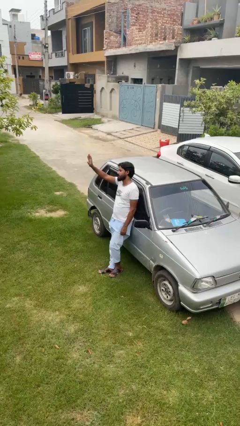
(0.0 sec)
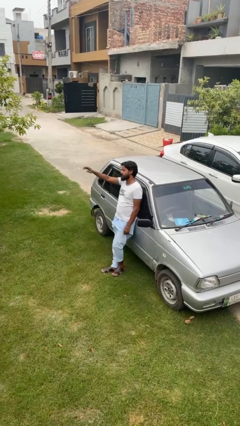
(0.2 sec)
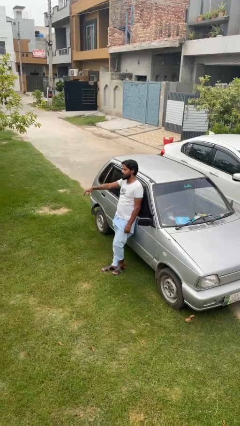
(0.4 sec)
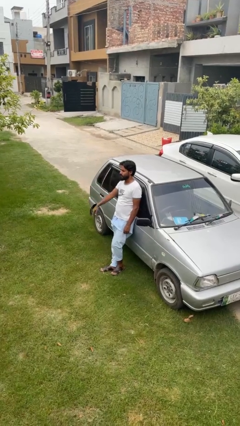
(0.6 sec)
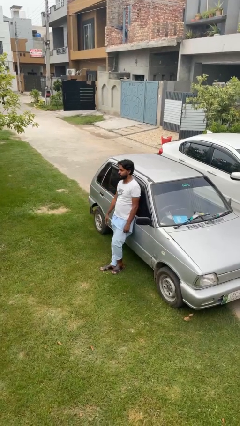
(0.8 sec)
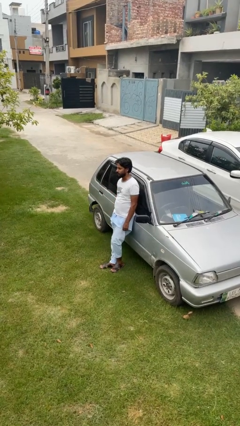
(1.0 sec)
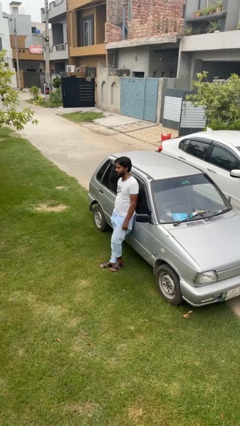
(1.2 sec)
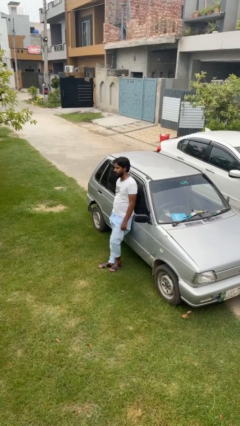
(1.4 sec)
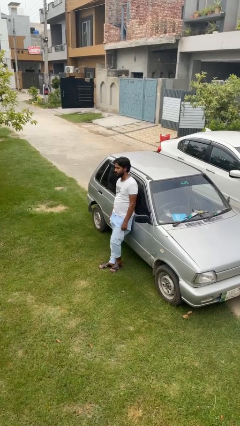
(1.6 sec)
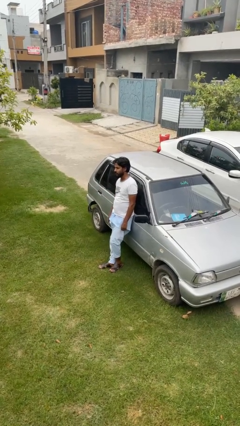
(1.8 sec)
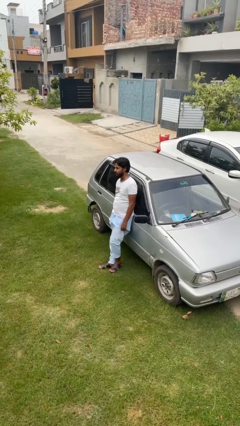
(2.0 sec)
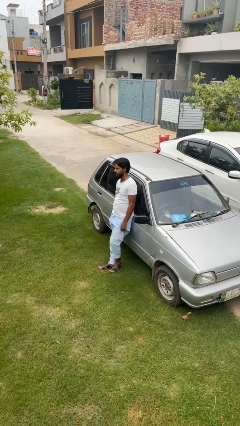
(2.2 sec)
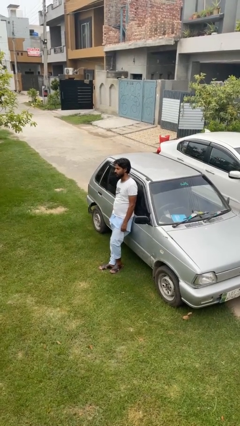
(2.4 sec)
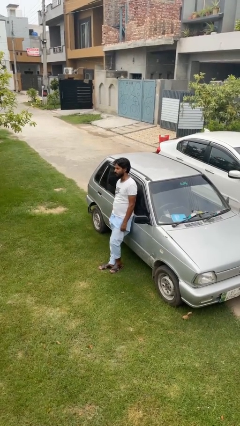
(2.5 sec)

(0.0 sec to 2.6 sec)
person gestures lower hand

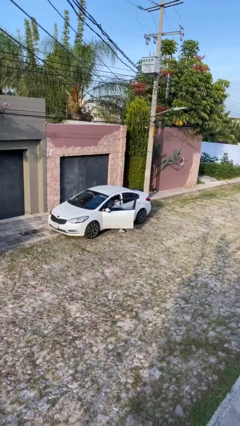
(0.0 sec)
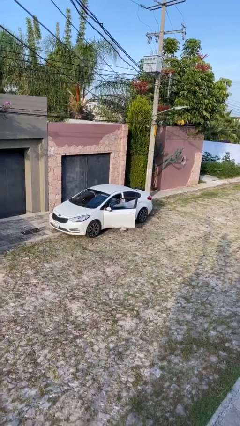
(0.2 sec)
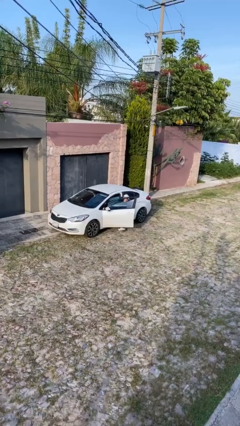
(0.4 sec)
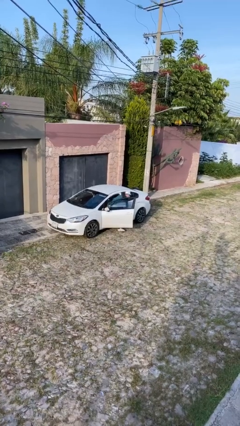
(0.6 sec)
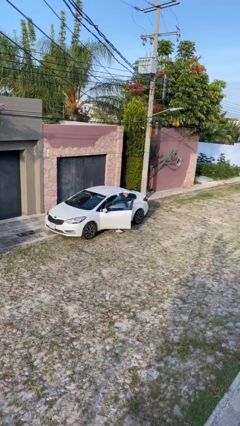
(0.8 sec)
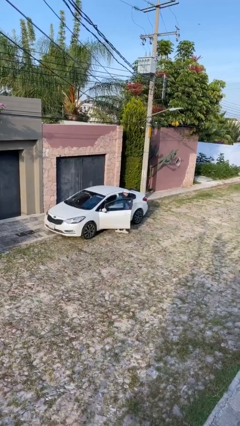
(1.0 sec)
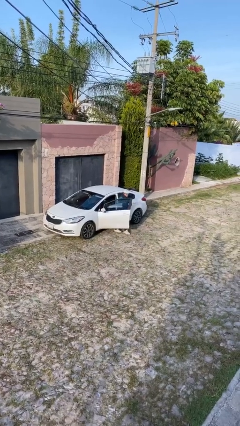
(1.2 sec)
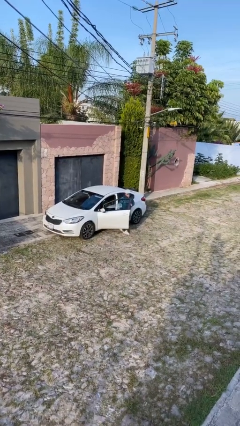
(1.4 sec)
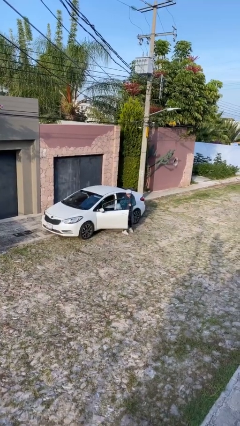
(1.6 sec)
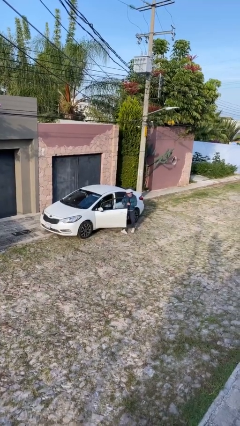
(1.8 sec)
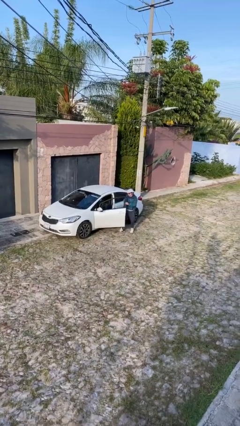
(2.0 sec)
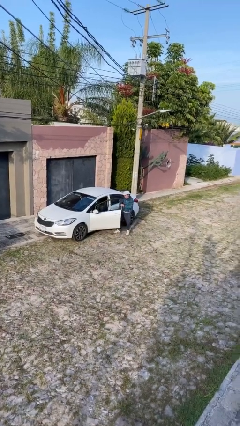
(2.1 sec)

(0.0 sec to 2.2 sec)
person exits car

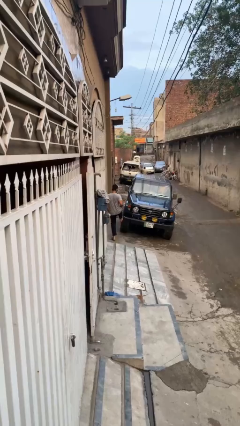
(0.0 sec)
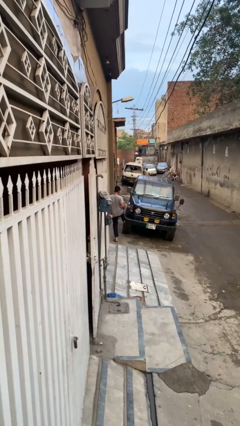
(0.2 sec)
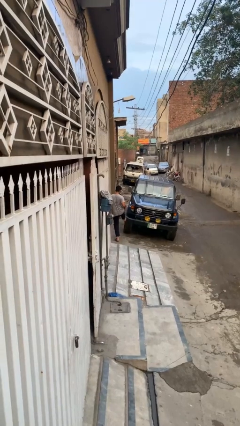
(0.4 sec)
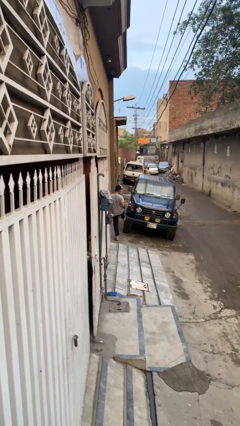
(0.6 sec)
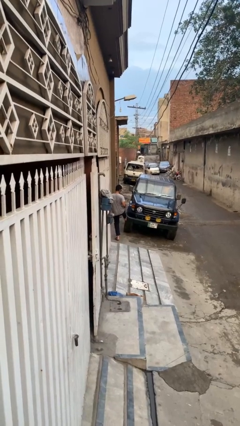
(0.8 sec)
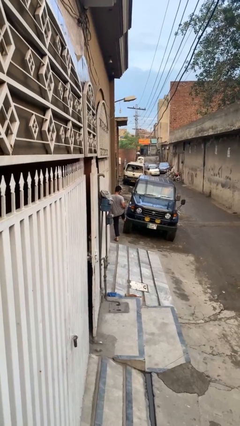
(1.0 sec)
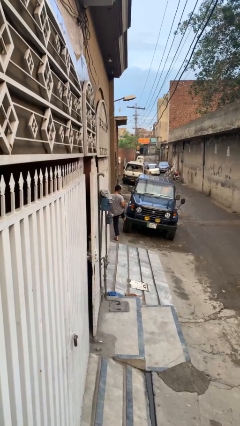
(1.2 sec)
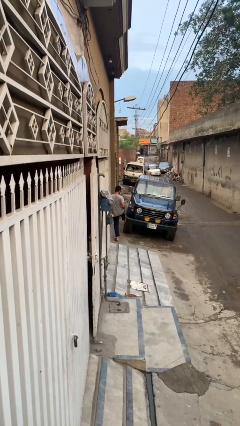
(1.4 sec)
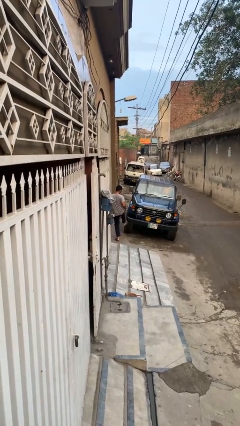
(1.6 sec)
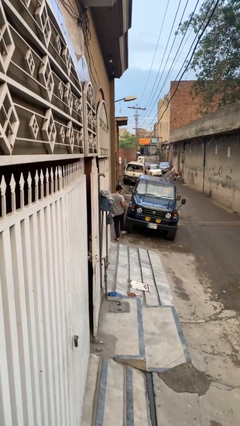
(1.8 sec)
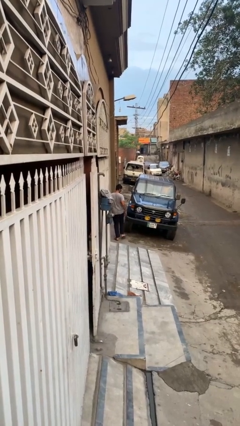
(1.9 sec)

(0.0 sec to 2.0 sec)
person kicks car tires

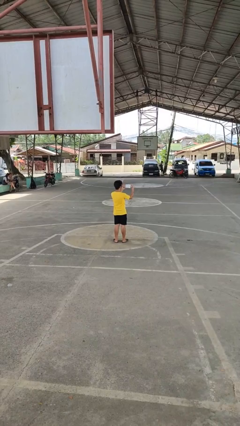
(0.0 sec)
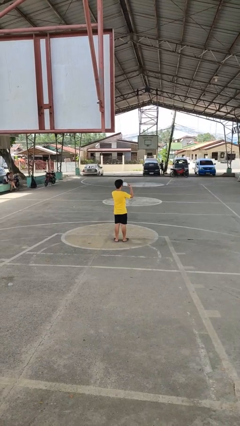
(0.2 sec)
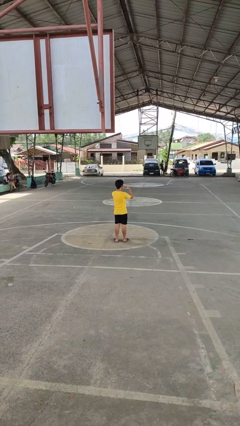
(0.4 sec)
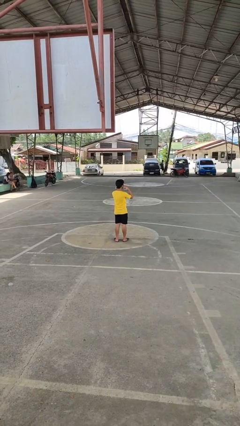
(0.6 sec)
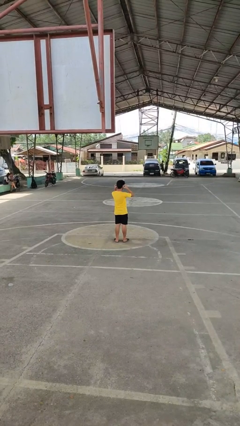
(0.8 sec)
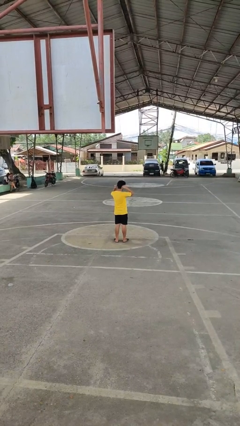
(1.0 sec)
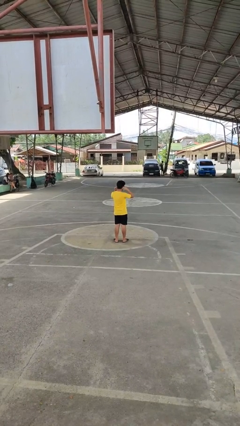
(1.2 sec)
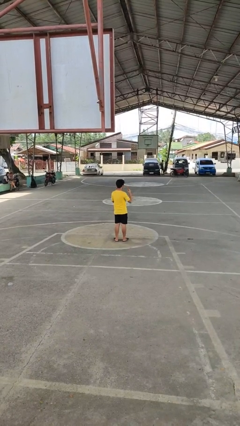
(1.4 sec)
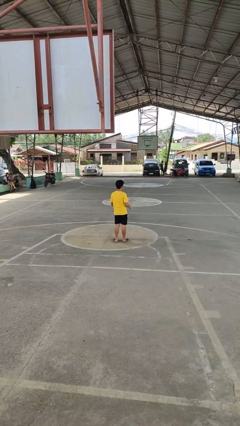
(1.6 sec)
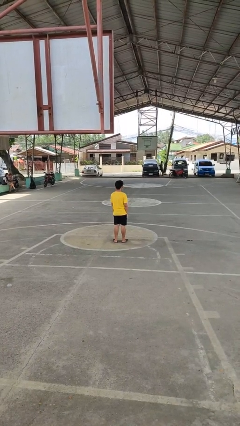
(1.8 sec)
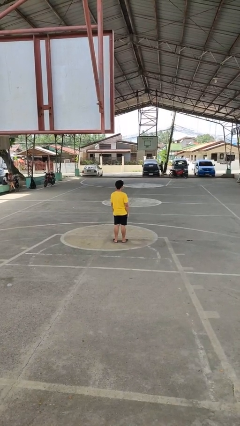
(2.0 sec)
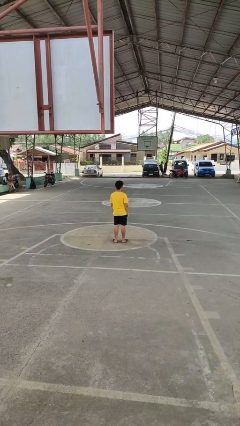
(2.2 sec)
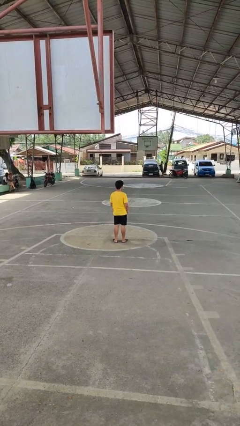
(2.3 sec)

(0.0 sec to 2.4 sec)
person puts on facemask

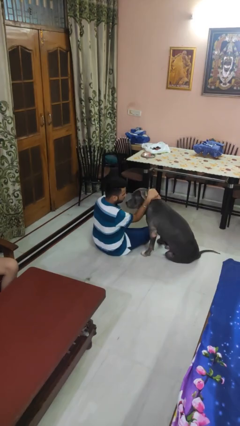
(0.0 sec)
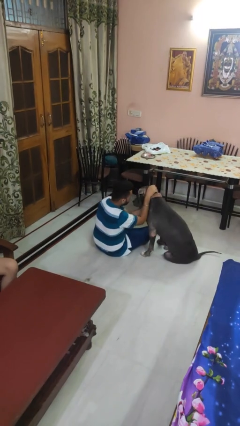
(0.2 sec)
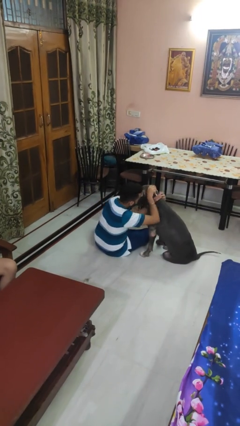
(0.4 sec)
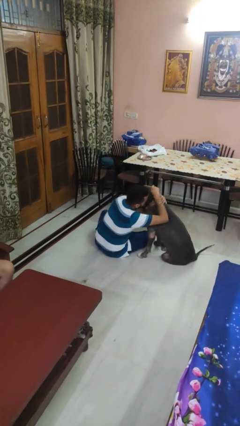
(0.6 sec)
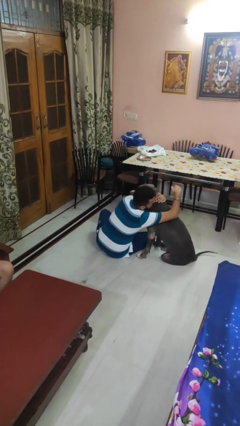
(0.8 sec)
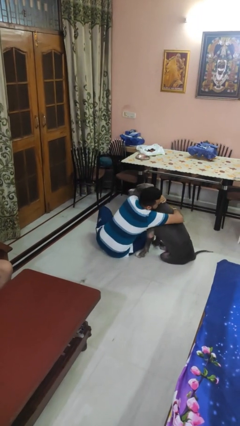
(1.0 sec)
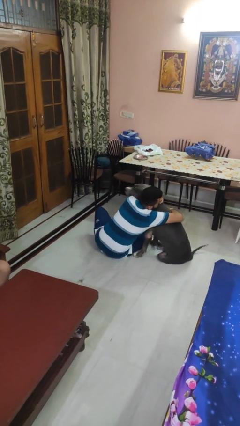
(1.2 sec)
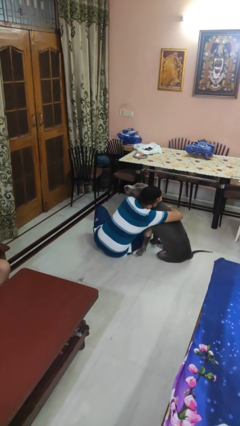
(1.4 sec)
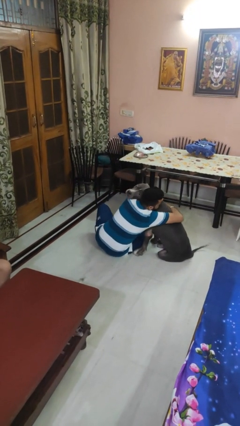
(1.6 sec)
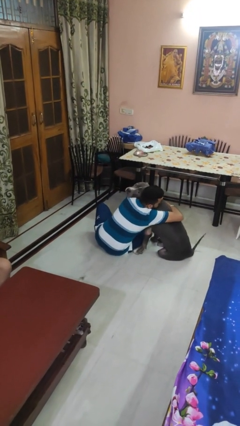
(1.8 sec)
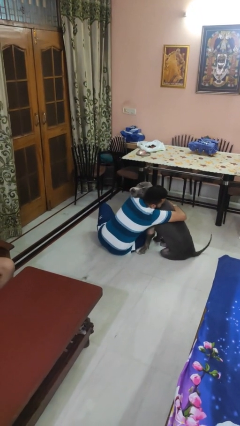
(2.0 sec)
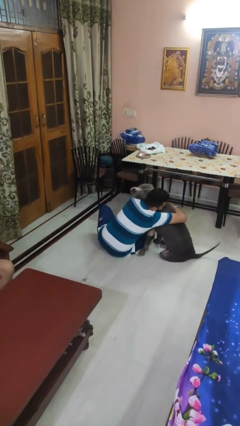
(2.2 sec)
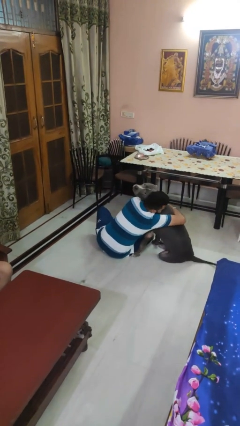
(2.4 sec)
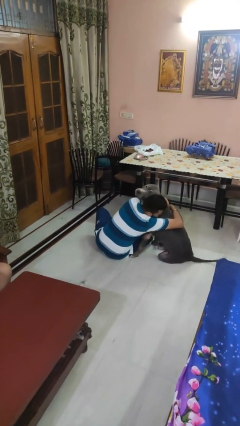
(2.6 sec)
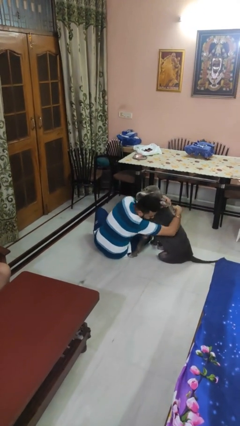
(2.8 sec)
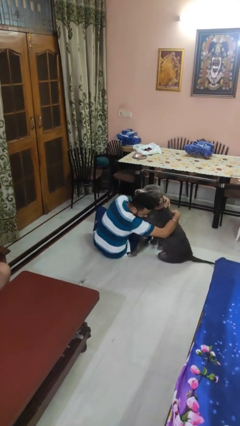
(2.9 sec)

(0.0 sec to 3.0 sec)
person hugs dog

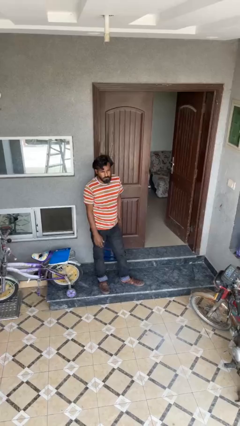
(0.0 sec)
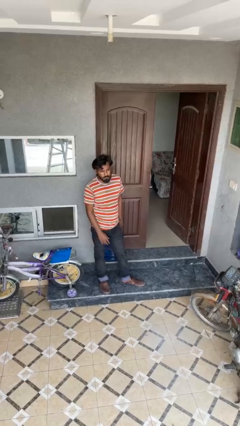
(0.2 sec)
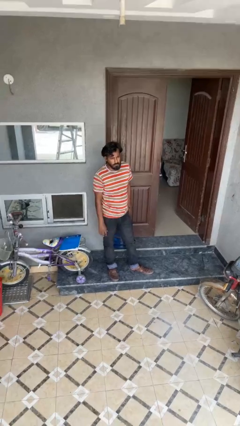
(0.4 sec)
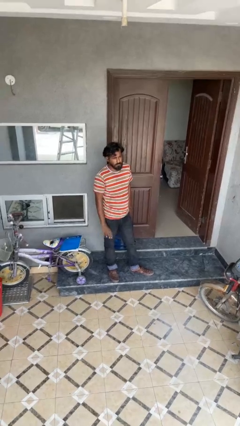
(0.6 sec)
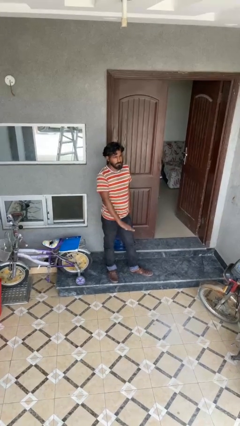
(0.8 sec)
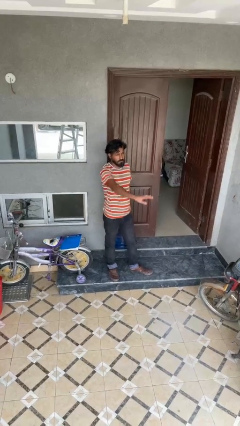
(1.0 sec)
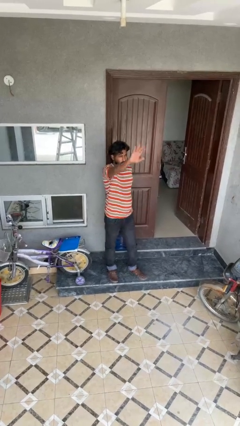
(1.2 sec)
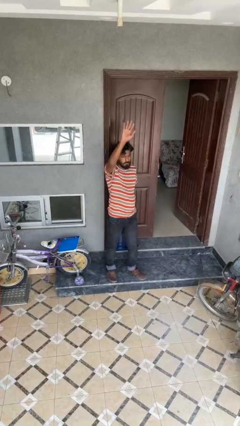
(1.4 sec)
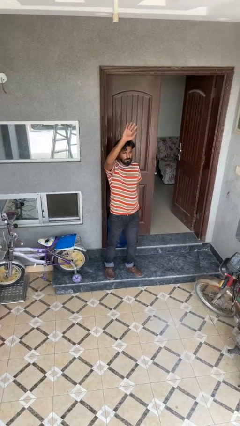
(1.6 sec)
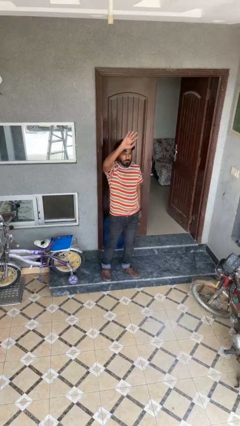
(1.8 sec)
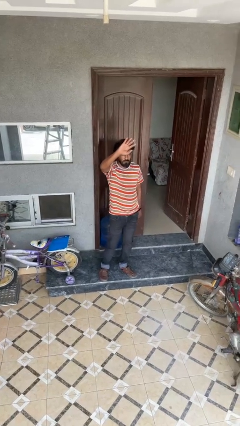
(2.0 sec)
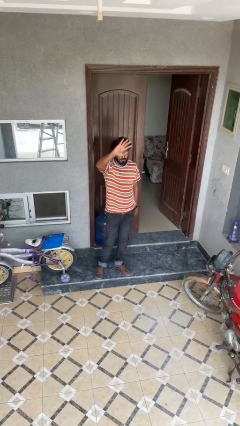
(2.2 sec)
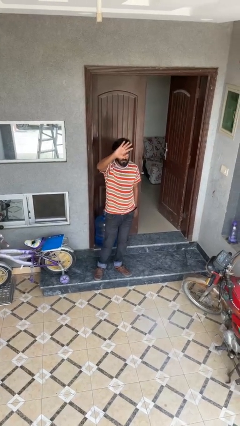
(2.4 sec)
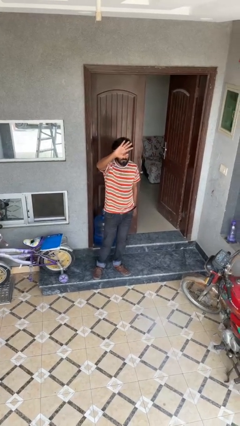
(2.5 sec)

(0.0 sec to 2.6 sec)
person gestures swipe up

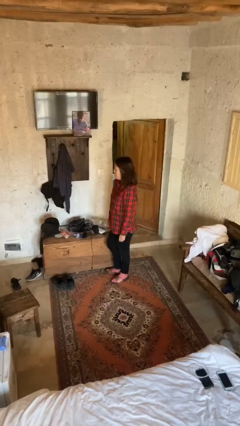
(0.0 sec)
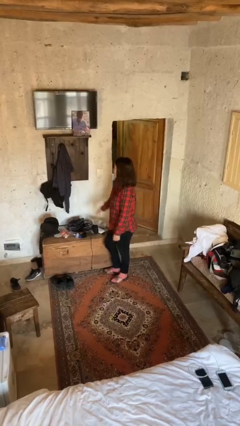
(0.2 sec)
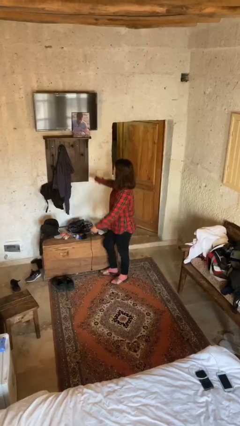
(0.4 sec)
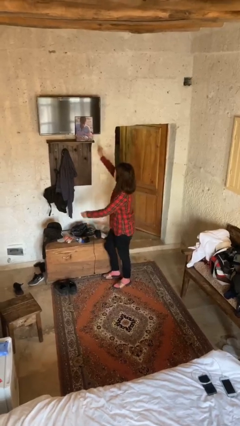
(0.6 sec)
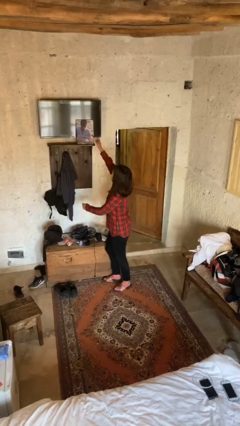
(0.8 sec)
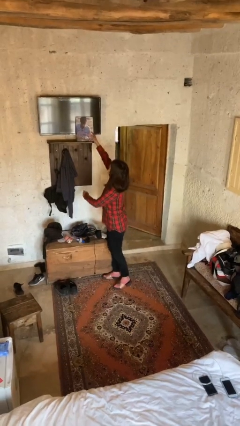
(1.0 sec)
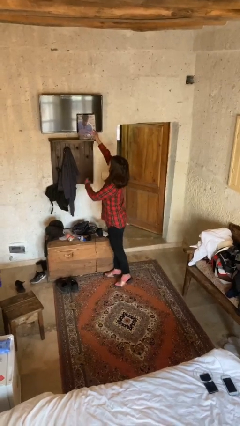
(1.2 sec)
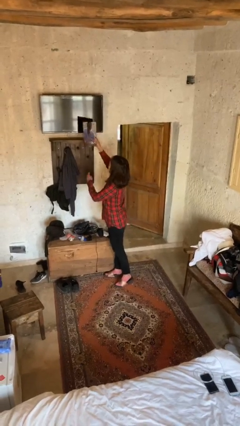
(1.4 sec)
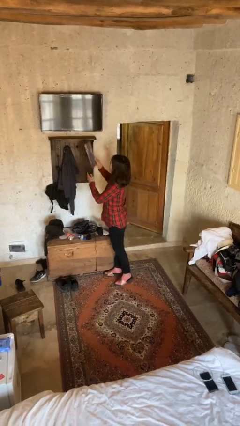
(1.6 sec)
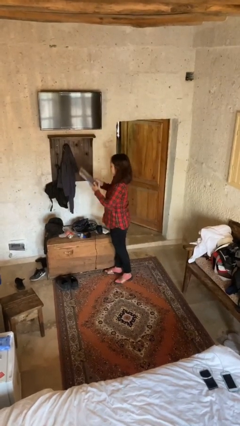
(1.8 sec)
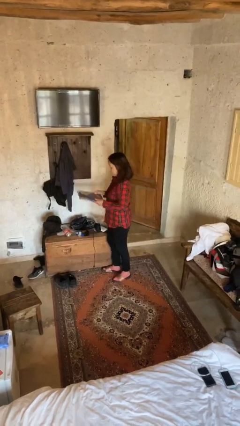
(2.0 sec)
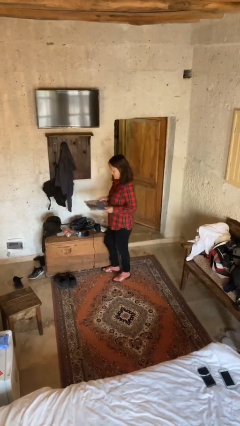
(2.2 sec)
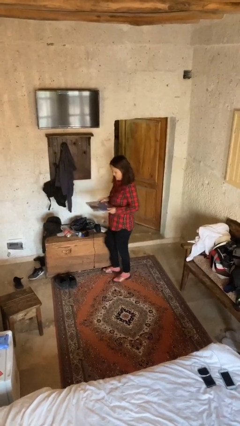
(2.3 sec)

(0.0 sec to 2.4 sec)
person picks up object from shelf
